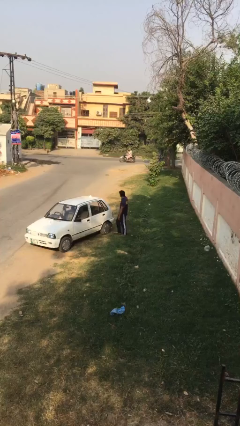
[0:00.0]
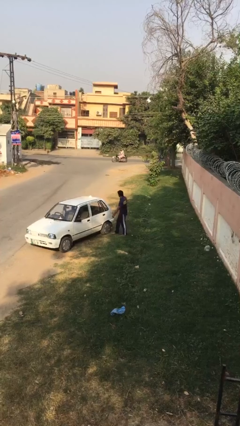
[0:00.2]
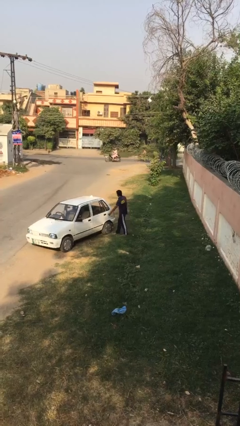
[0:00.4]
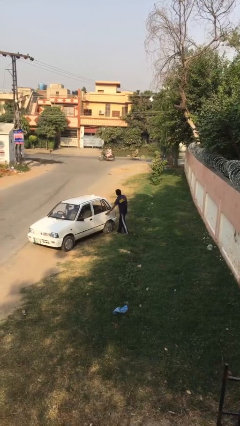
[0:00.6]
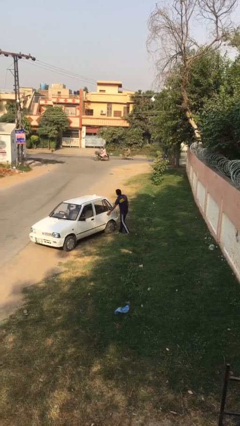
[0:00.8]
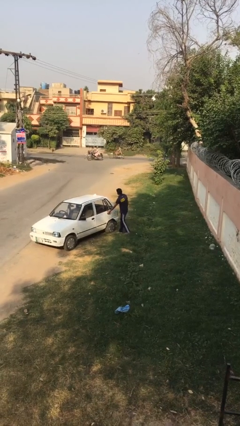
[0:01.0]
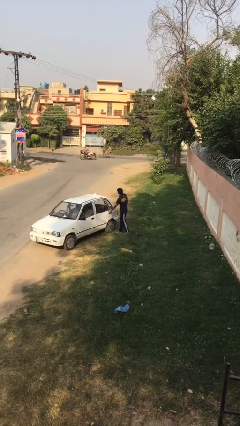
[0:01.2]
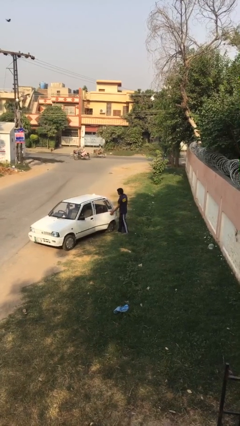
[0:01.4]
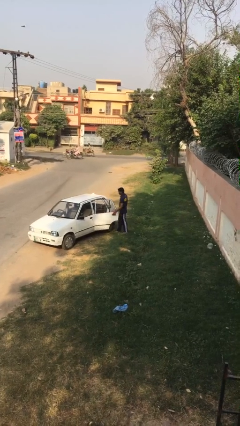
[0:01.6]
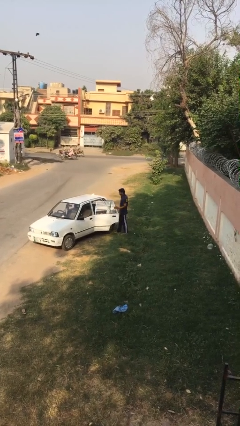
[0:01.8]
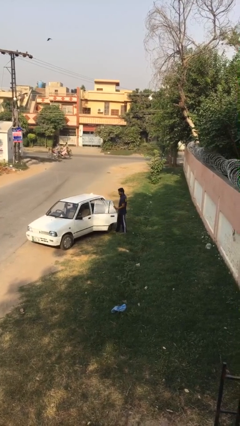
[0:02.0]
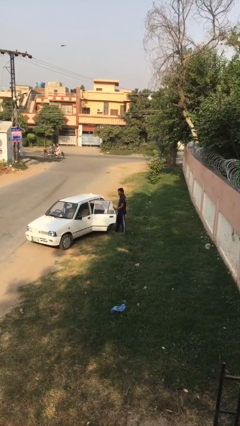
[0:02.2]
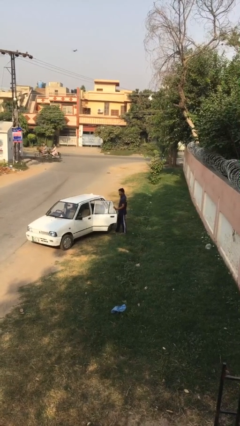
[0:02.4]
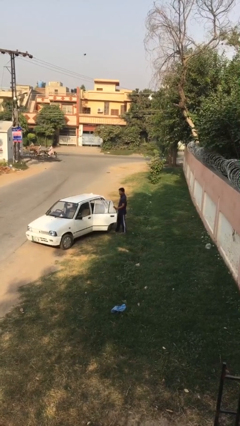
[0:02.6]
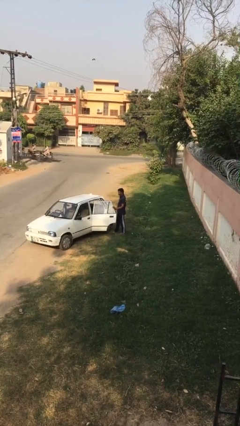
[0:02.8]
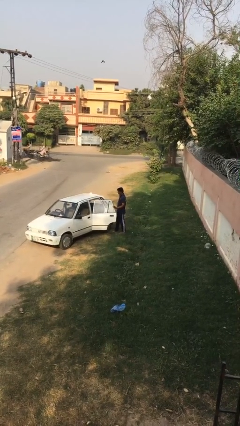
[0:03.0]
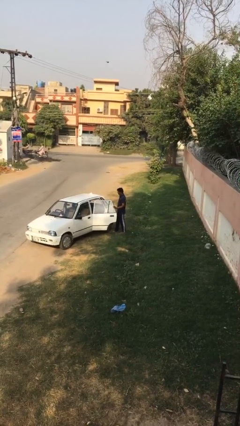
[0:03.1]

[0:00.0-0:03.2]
person opens car door

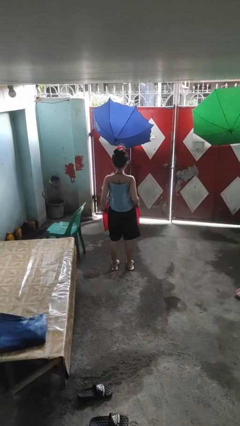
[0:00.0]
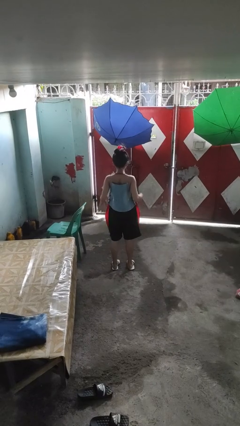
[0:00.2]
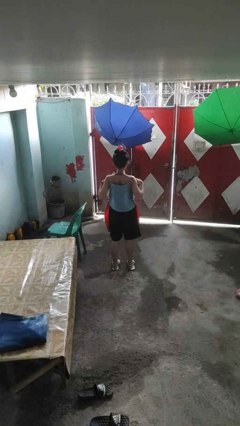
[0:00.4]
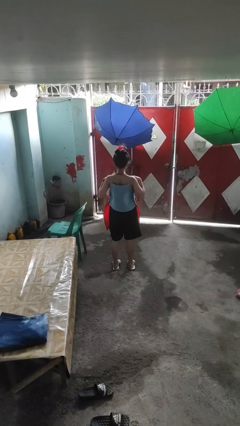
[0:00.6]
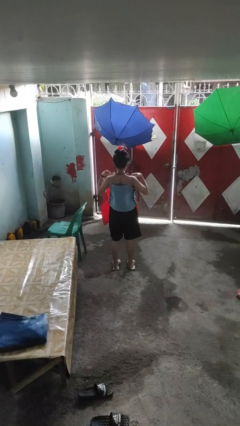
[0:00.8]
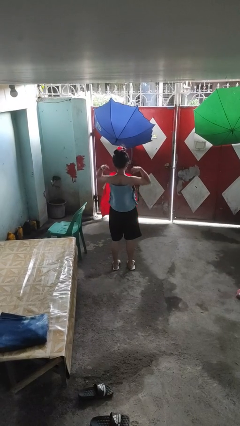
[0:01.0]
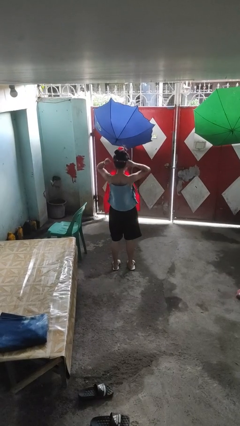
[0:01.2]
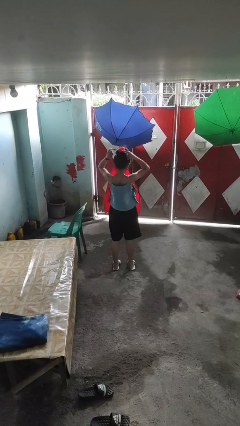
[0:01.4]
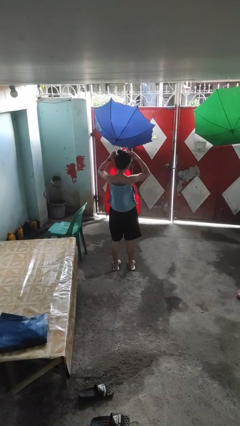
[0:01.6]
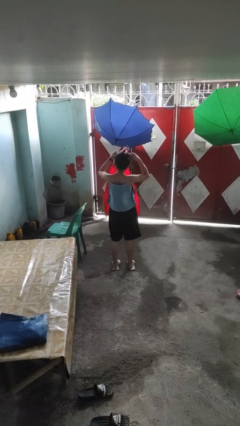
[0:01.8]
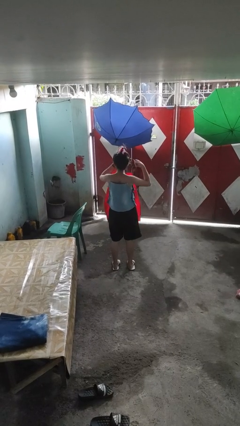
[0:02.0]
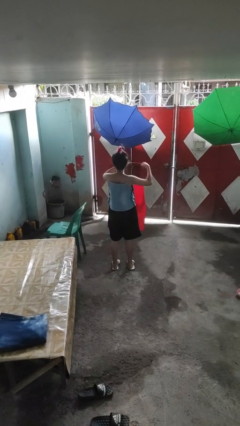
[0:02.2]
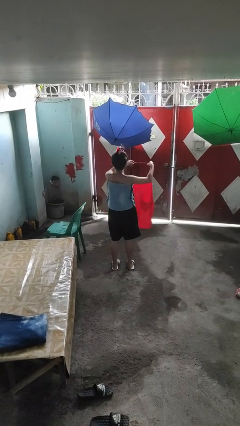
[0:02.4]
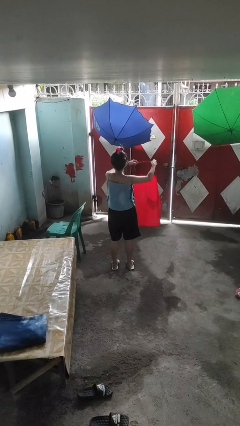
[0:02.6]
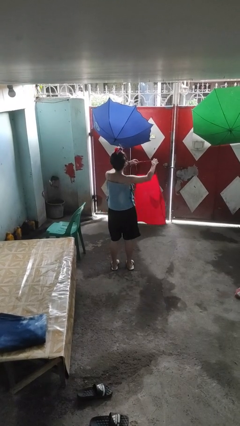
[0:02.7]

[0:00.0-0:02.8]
person takes off apron

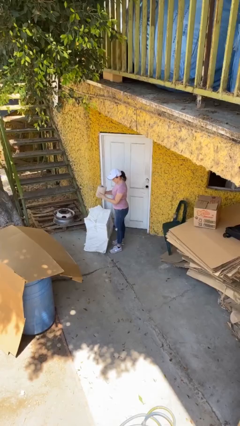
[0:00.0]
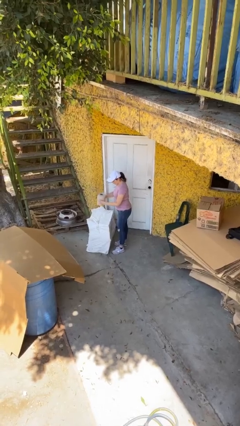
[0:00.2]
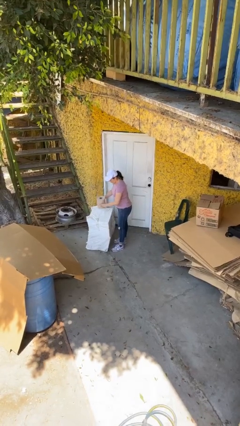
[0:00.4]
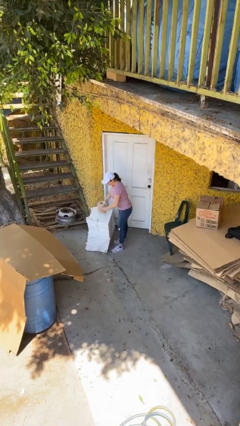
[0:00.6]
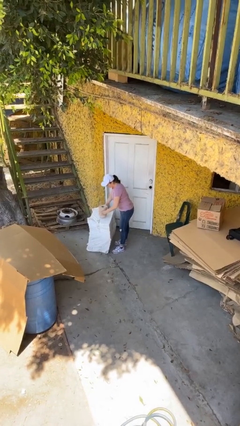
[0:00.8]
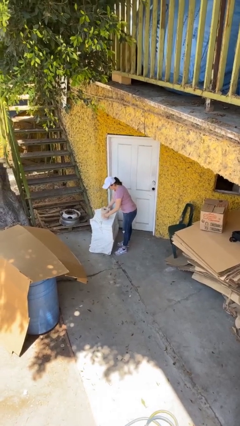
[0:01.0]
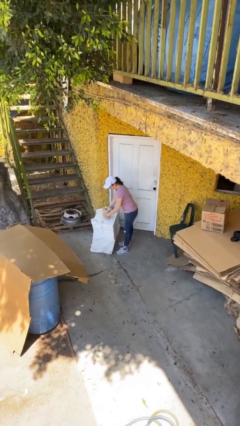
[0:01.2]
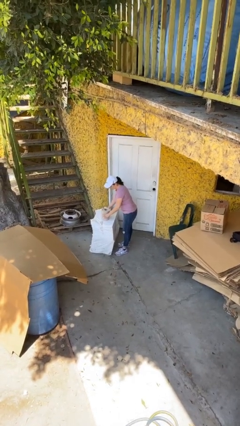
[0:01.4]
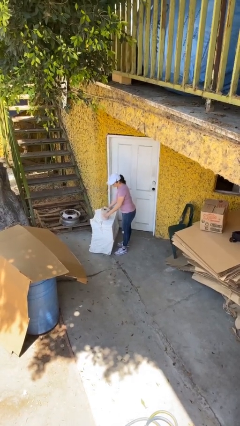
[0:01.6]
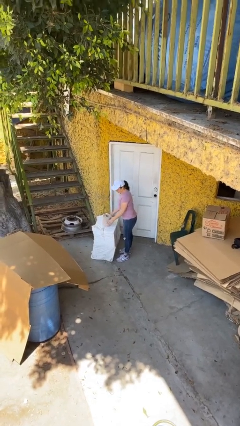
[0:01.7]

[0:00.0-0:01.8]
person puts down object on table

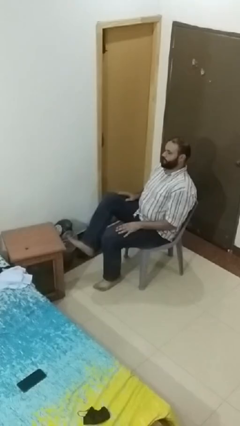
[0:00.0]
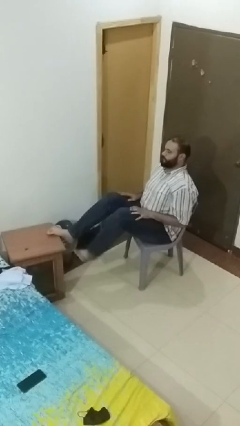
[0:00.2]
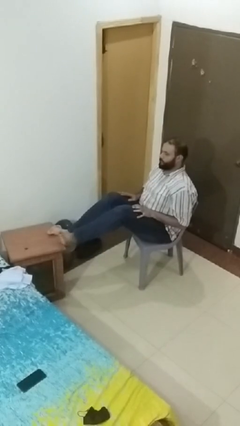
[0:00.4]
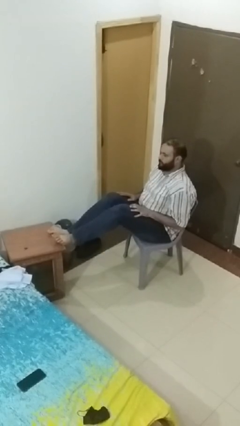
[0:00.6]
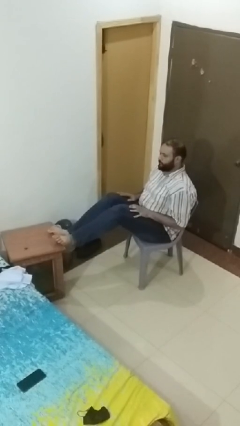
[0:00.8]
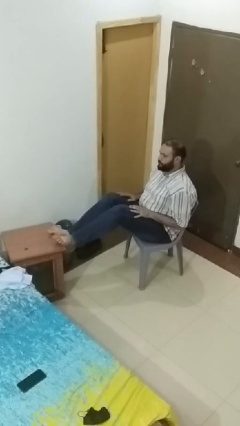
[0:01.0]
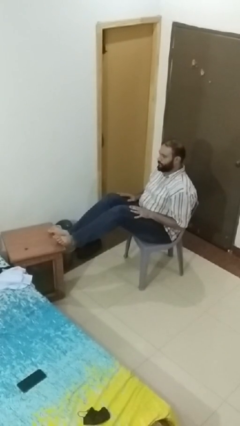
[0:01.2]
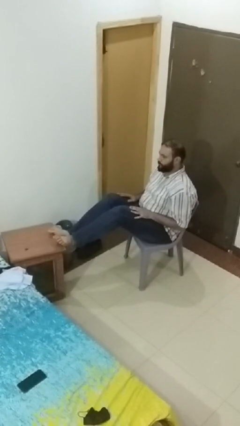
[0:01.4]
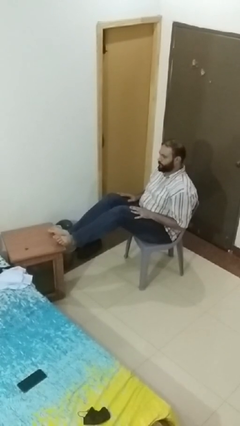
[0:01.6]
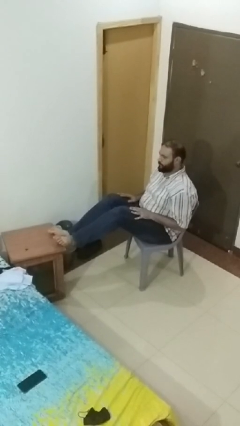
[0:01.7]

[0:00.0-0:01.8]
person puts feet up

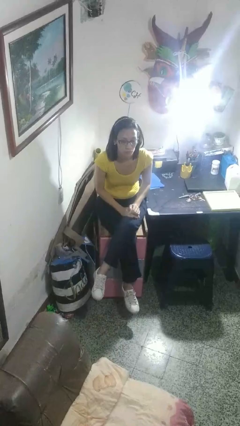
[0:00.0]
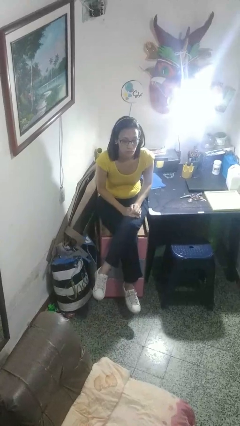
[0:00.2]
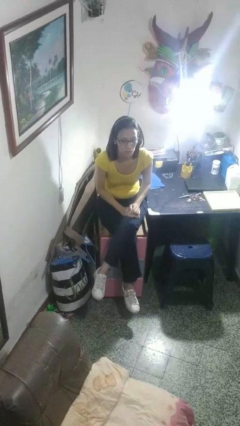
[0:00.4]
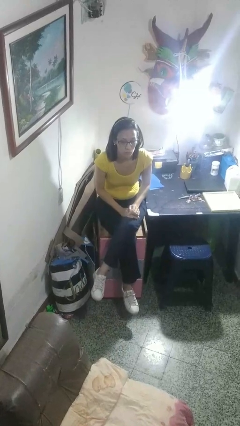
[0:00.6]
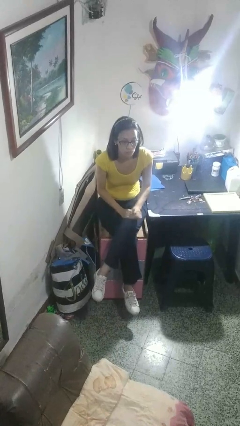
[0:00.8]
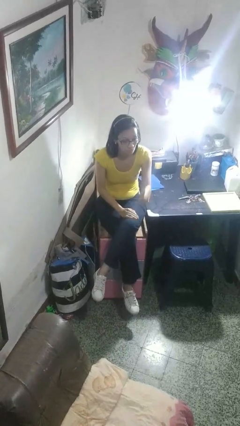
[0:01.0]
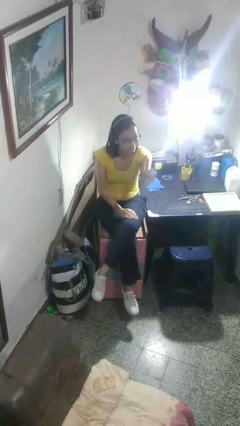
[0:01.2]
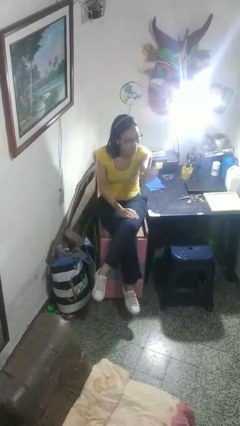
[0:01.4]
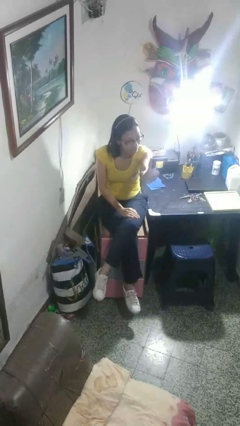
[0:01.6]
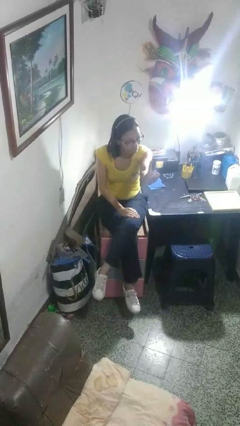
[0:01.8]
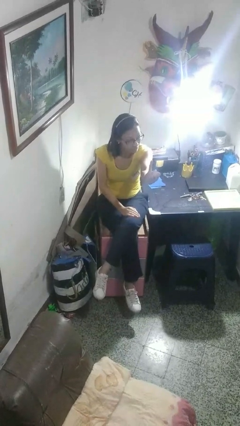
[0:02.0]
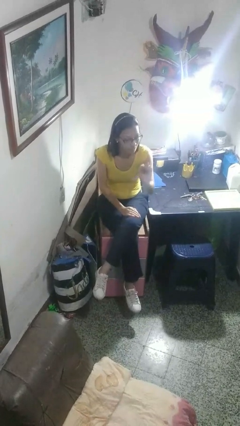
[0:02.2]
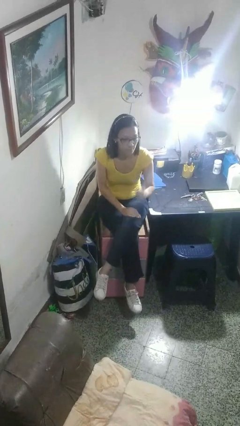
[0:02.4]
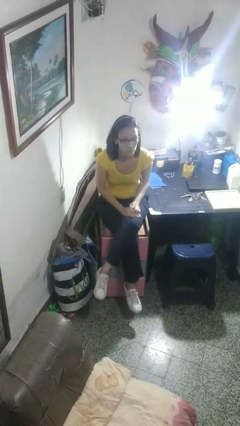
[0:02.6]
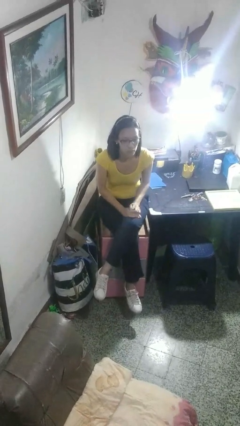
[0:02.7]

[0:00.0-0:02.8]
person gestures number one

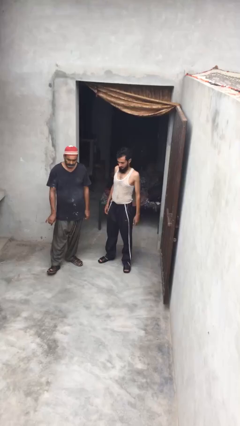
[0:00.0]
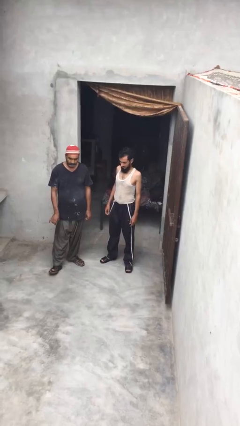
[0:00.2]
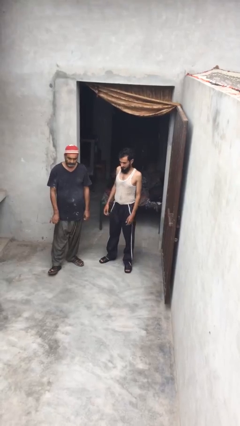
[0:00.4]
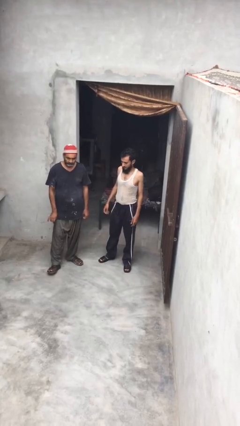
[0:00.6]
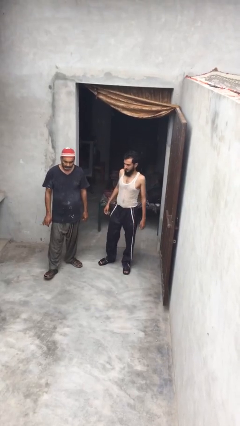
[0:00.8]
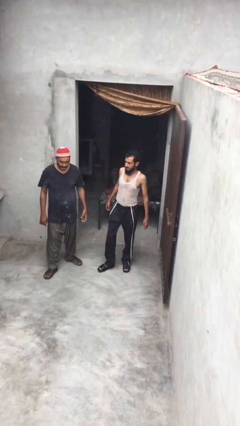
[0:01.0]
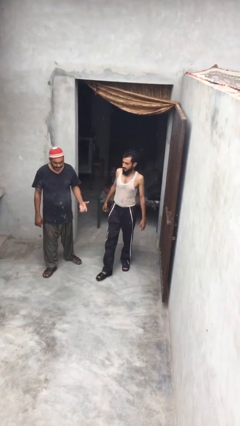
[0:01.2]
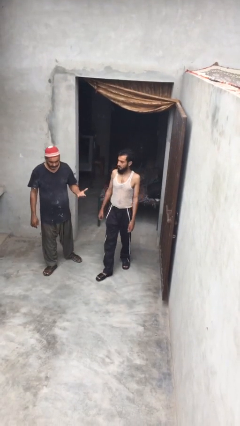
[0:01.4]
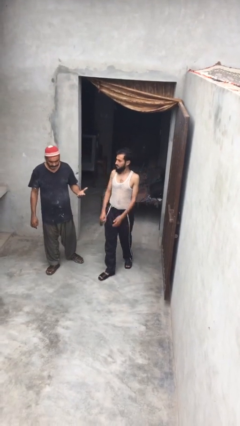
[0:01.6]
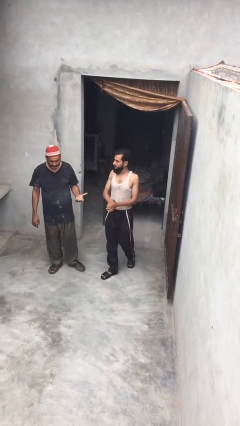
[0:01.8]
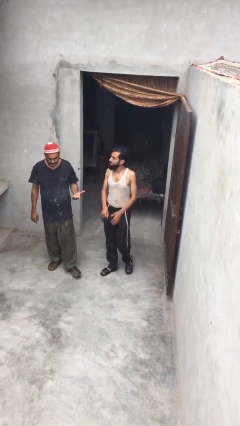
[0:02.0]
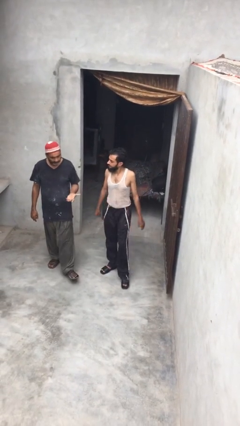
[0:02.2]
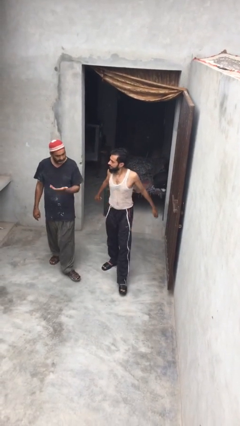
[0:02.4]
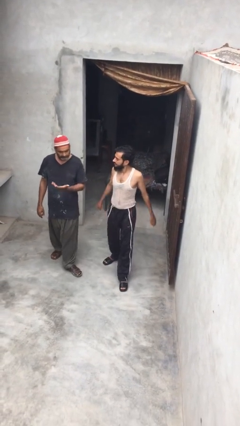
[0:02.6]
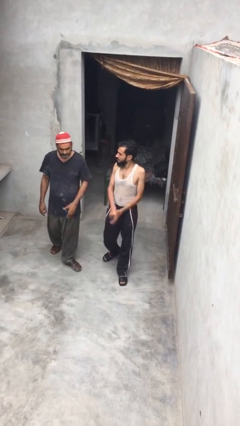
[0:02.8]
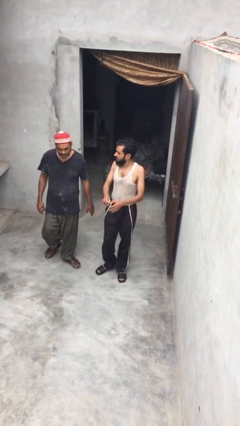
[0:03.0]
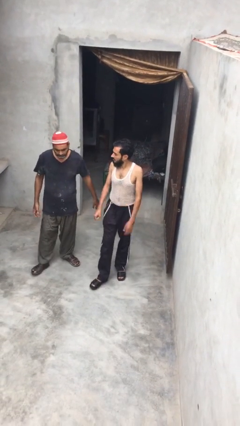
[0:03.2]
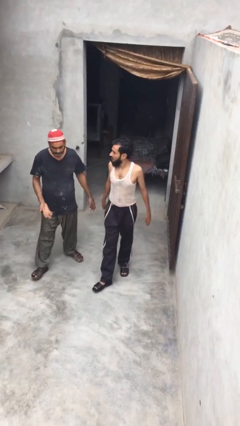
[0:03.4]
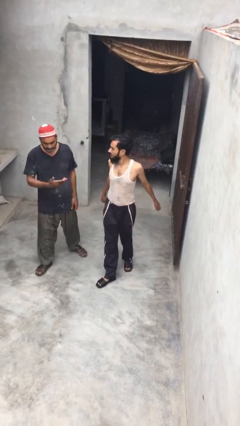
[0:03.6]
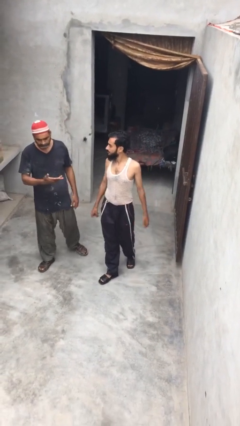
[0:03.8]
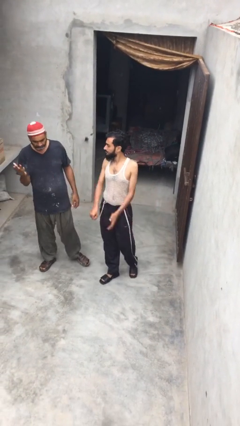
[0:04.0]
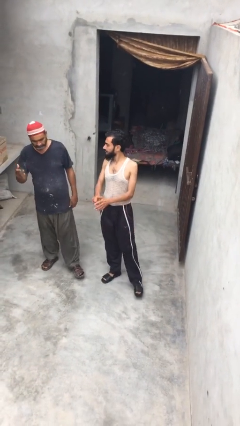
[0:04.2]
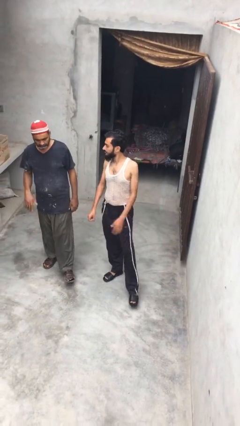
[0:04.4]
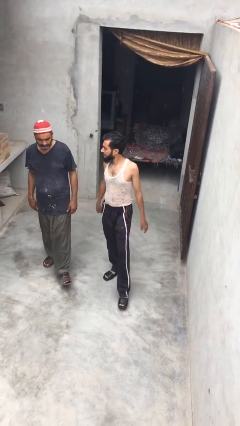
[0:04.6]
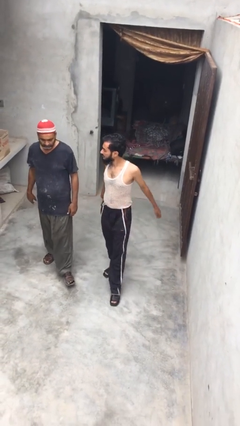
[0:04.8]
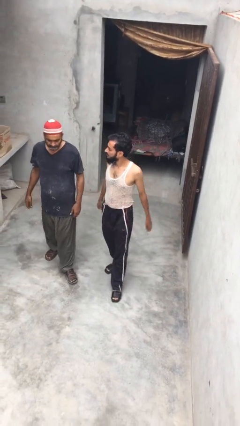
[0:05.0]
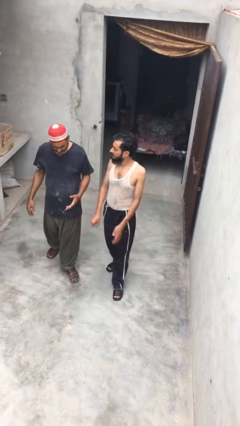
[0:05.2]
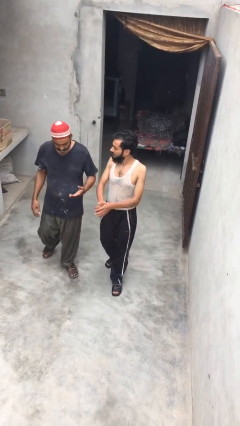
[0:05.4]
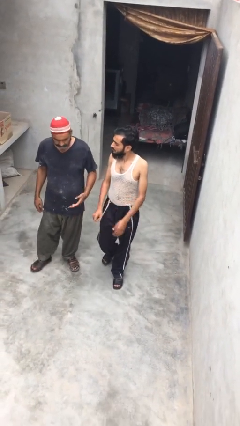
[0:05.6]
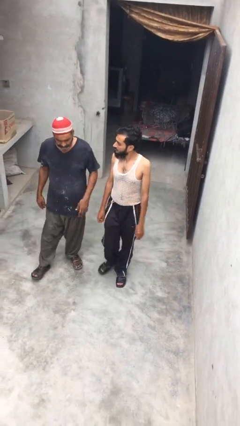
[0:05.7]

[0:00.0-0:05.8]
person talks to person
